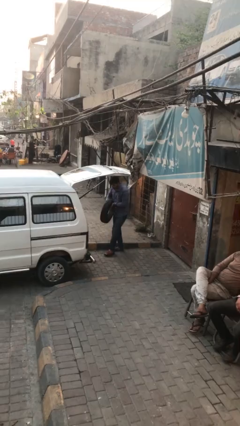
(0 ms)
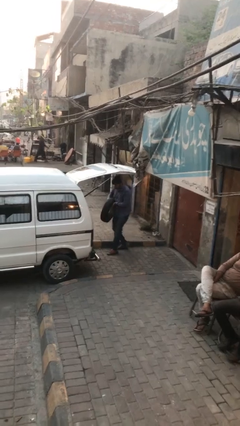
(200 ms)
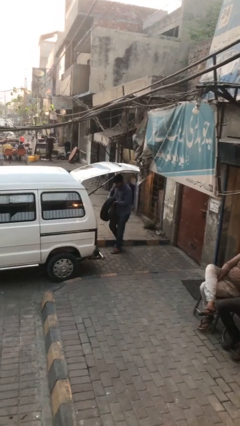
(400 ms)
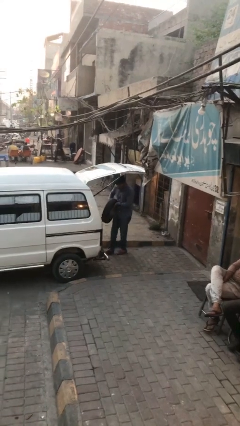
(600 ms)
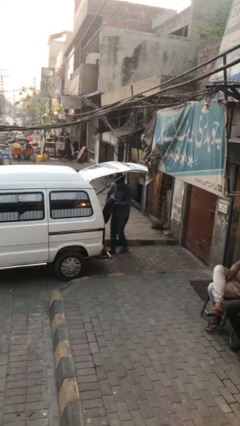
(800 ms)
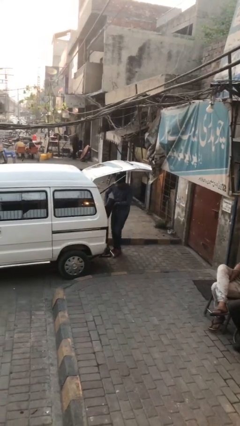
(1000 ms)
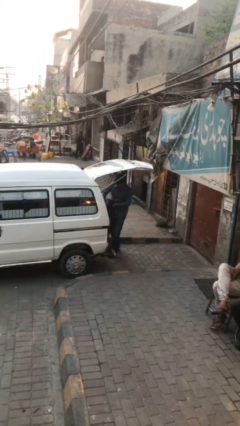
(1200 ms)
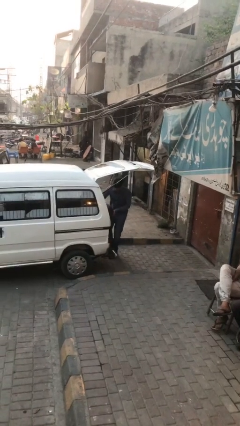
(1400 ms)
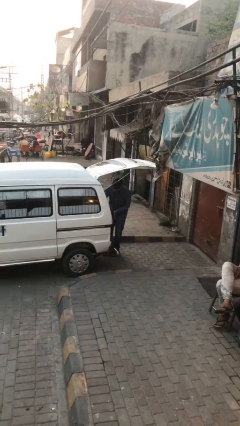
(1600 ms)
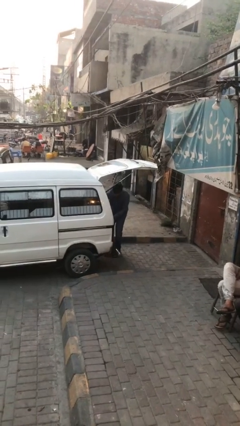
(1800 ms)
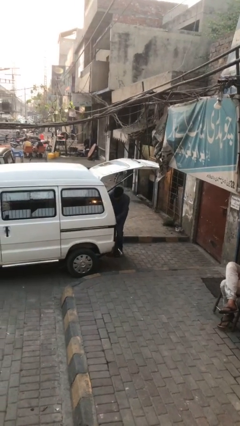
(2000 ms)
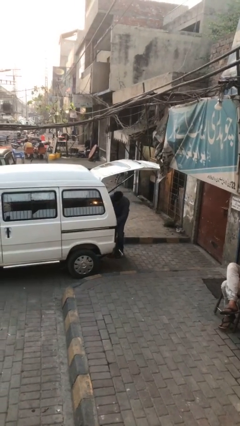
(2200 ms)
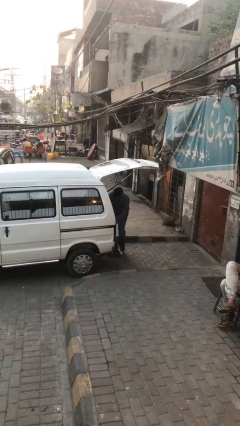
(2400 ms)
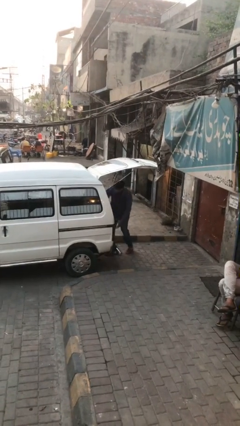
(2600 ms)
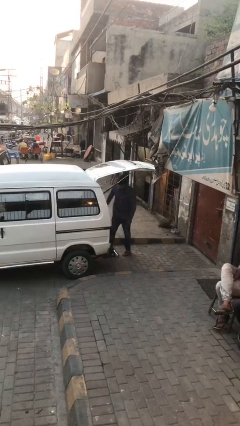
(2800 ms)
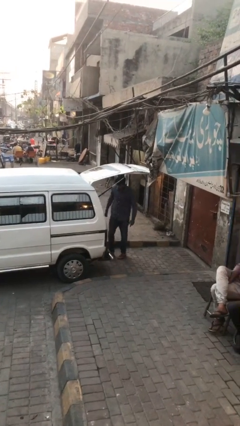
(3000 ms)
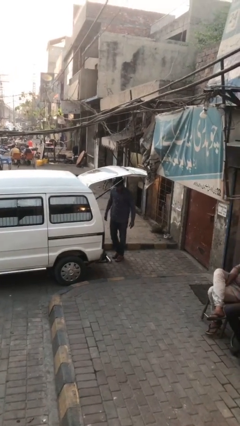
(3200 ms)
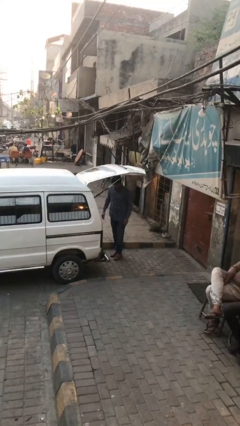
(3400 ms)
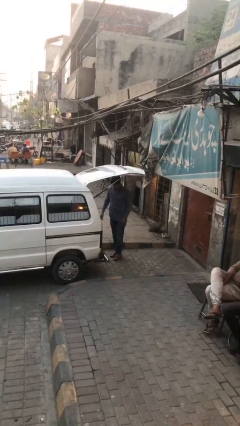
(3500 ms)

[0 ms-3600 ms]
person loads car

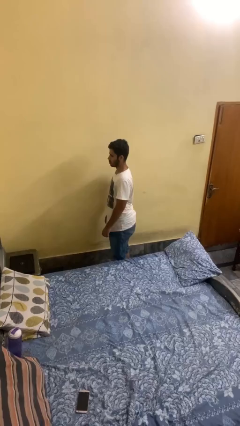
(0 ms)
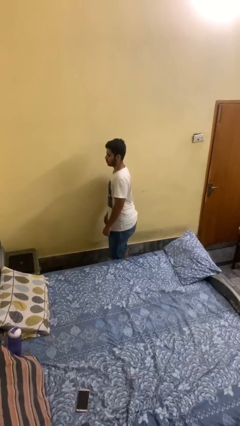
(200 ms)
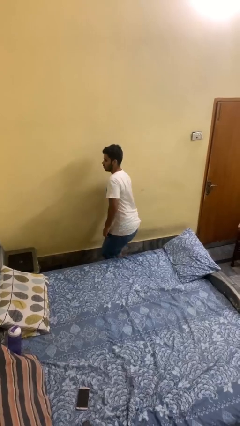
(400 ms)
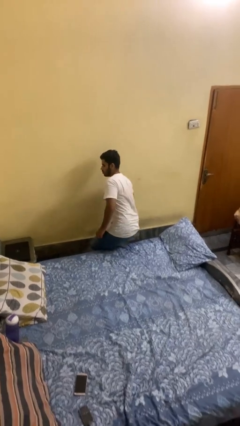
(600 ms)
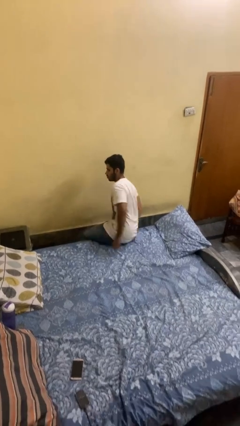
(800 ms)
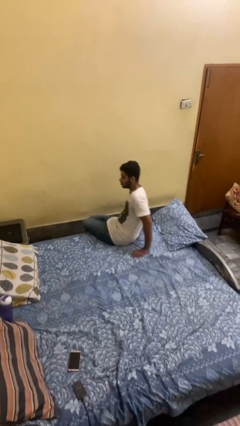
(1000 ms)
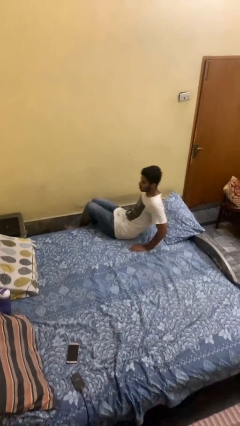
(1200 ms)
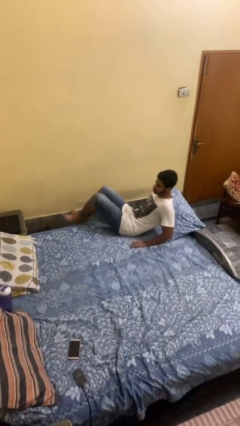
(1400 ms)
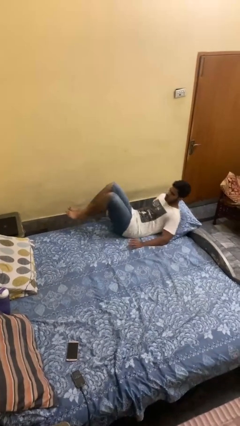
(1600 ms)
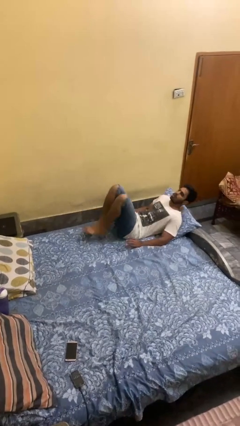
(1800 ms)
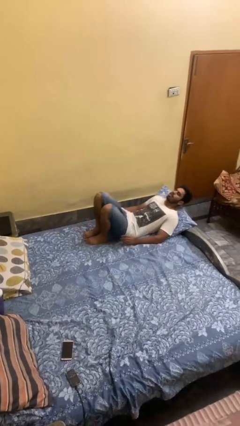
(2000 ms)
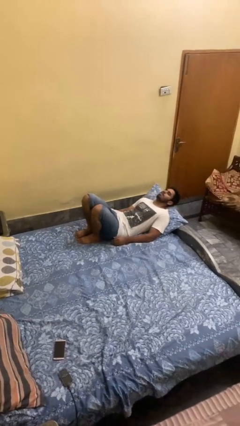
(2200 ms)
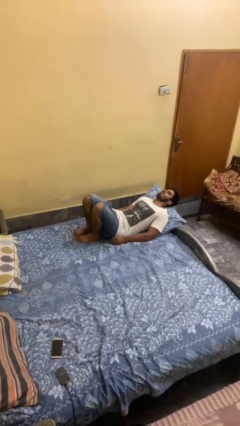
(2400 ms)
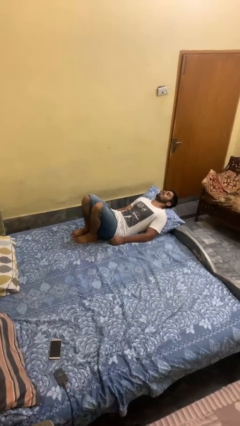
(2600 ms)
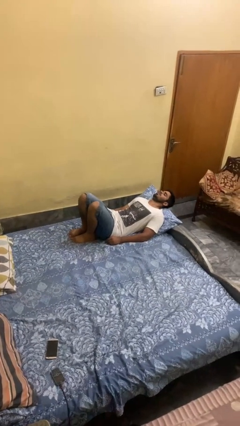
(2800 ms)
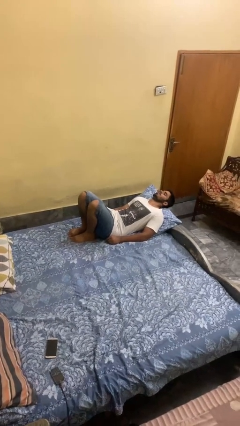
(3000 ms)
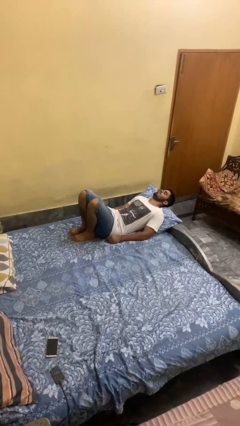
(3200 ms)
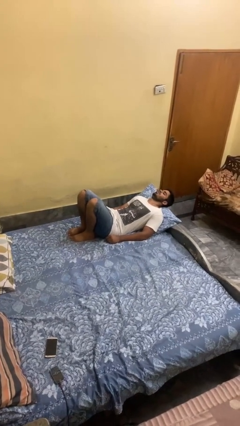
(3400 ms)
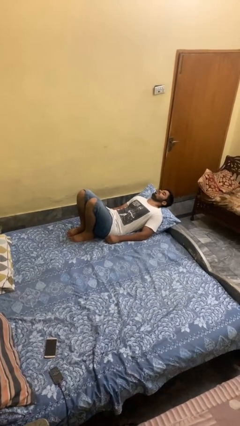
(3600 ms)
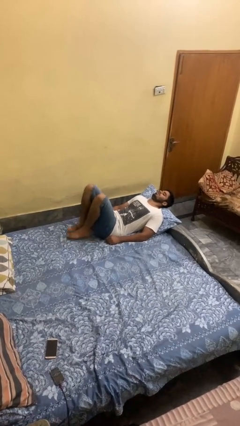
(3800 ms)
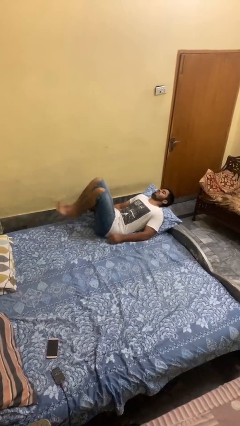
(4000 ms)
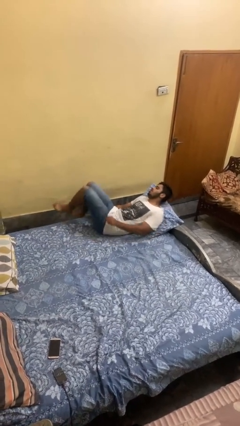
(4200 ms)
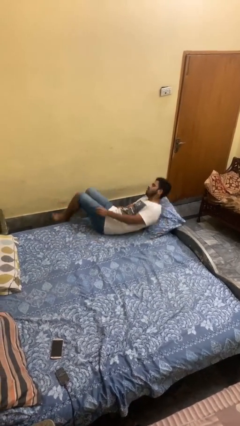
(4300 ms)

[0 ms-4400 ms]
person lies down on bed

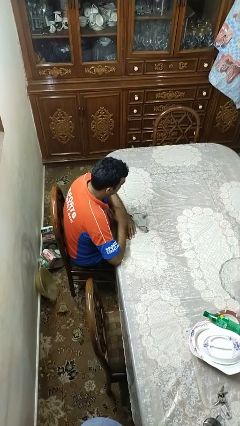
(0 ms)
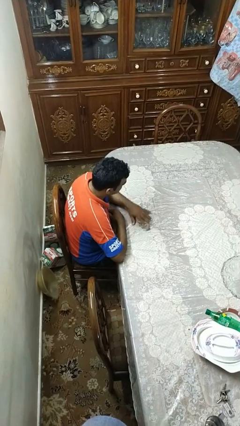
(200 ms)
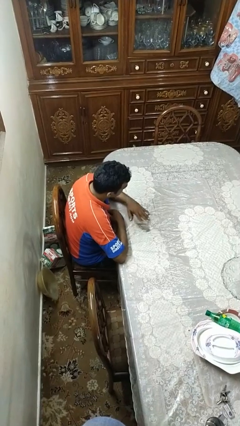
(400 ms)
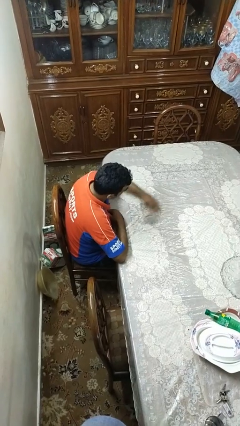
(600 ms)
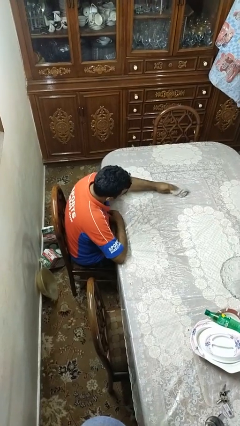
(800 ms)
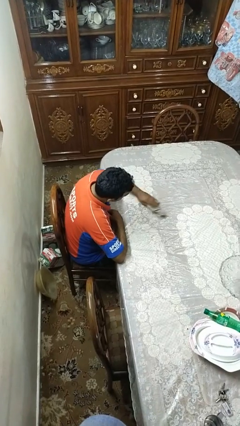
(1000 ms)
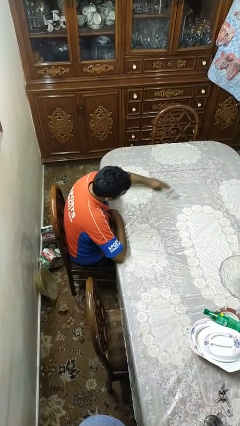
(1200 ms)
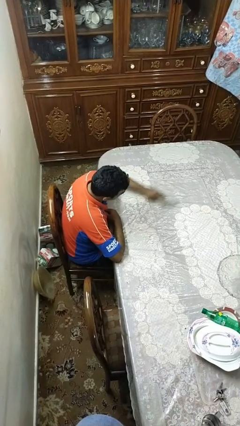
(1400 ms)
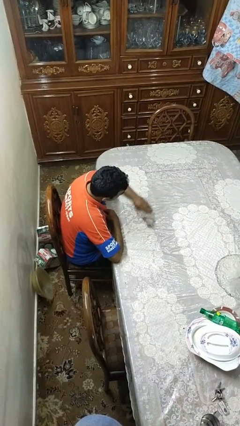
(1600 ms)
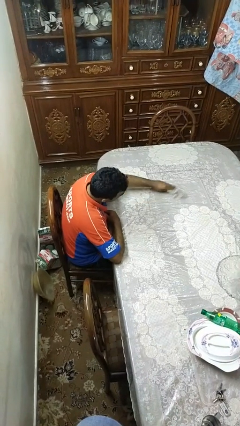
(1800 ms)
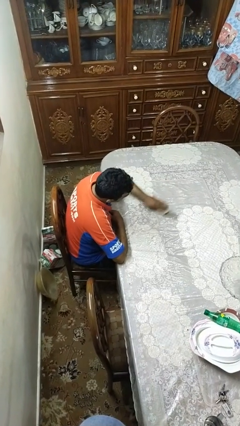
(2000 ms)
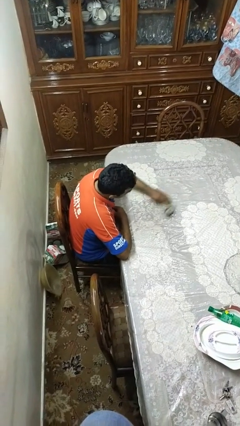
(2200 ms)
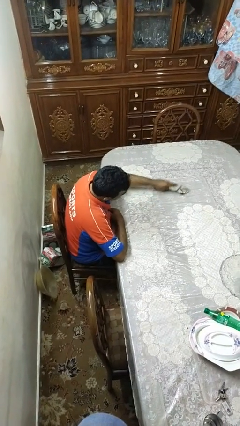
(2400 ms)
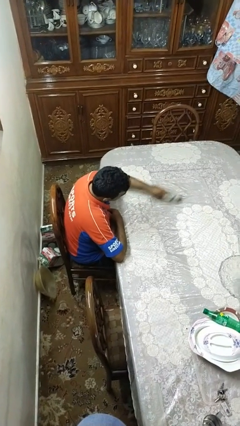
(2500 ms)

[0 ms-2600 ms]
person cleans table with rag

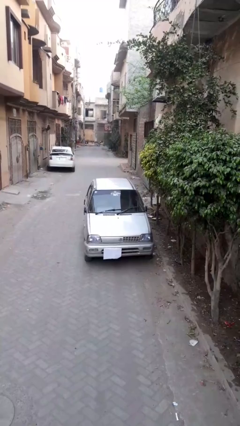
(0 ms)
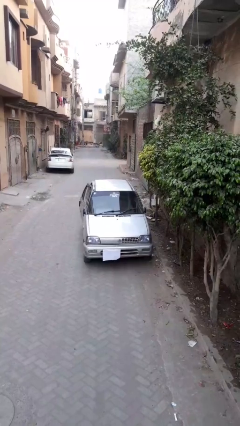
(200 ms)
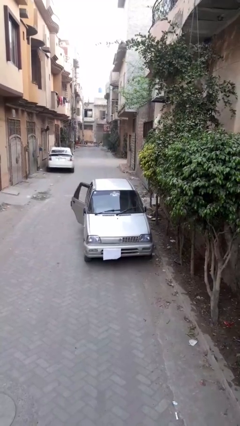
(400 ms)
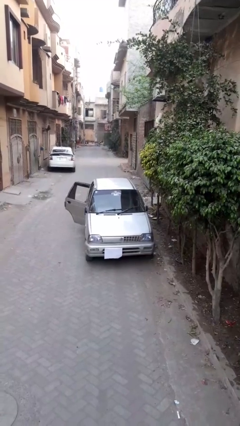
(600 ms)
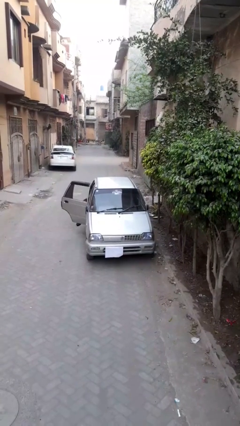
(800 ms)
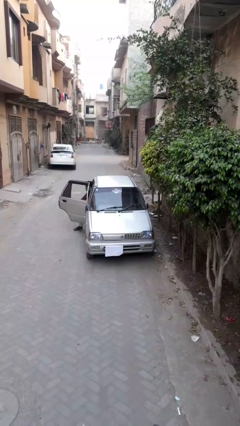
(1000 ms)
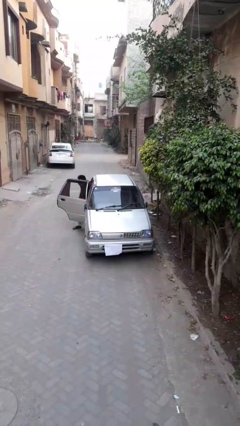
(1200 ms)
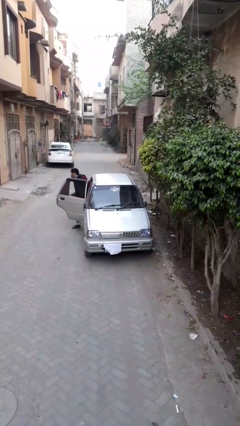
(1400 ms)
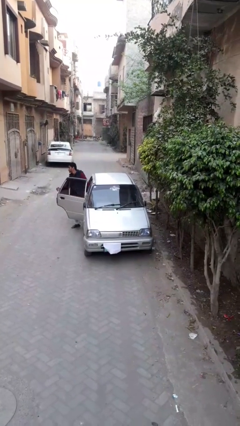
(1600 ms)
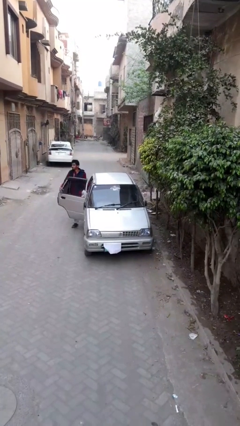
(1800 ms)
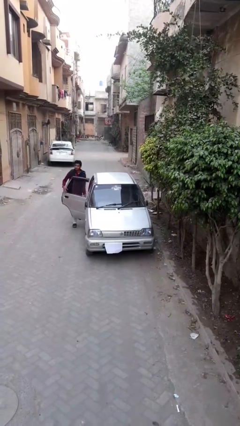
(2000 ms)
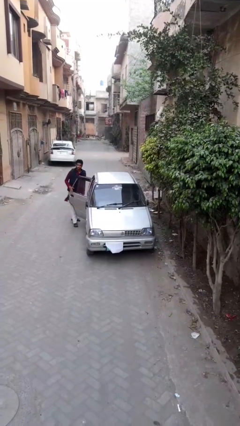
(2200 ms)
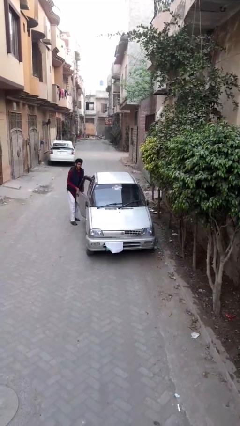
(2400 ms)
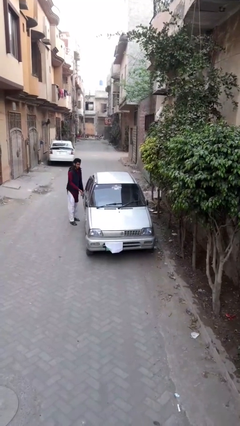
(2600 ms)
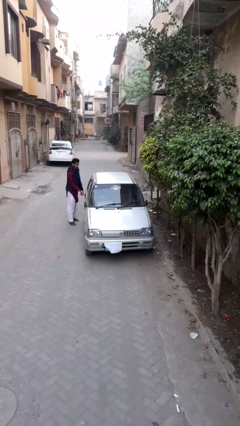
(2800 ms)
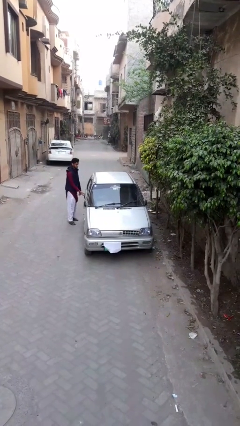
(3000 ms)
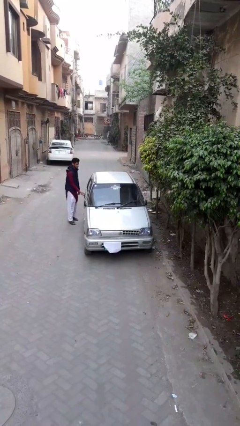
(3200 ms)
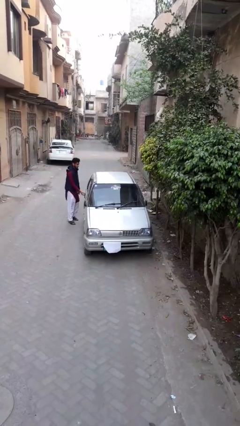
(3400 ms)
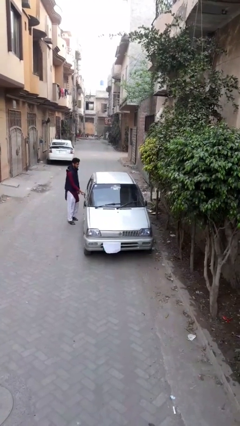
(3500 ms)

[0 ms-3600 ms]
car drops off person

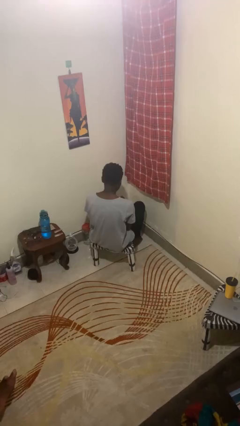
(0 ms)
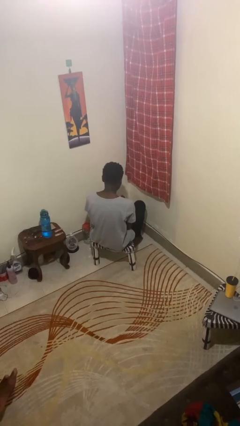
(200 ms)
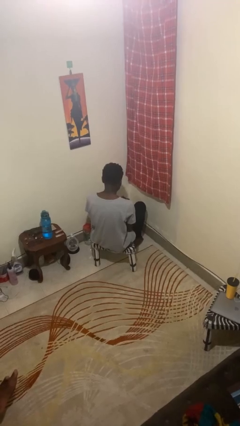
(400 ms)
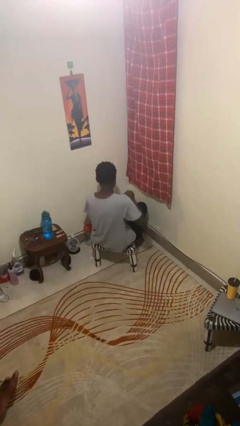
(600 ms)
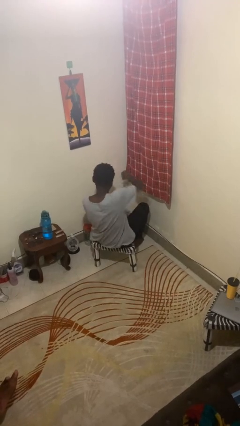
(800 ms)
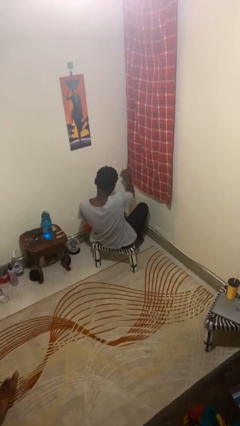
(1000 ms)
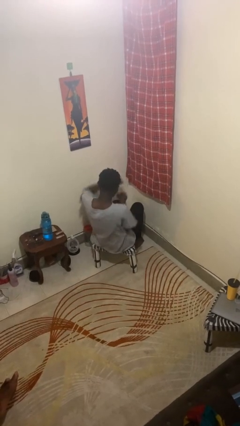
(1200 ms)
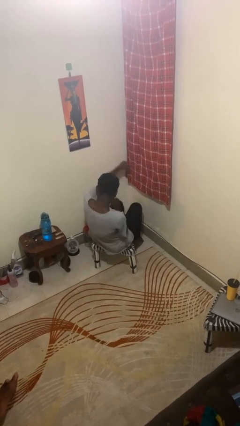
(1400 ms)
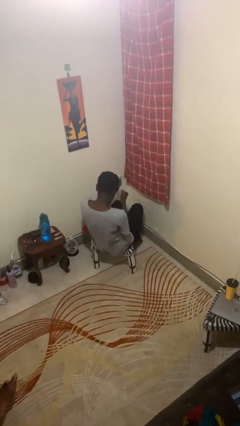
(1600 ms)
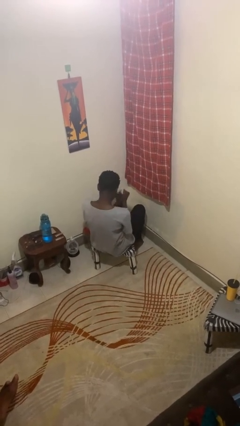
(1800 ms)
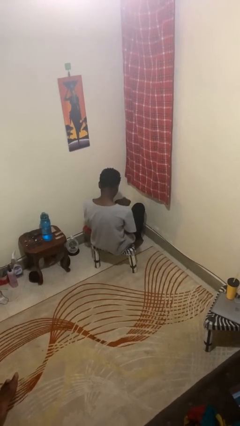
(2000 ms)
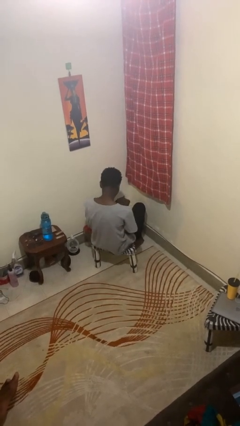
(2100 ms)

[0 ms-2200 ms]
person punches

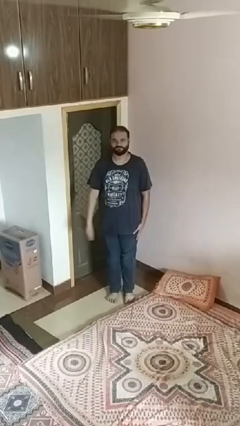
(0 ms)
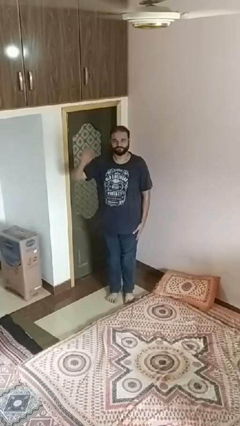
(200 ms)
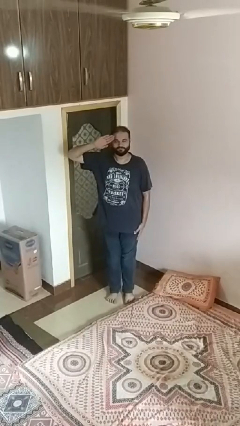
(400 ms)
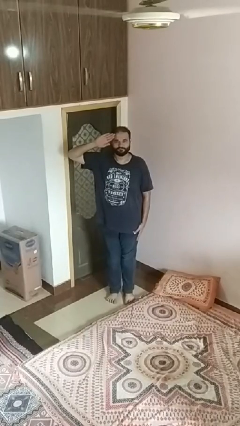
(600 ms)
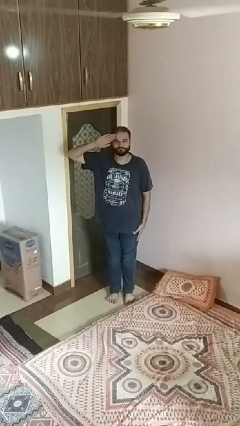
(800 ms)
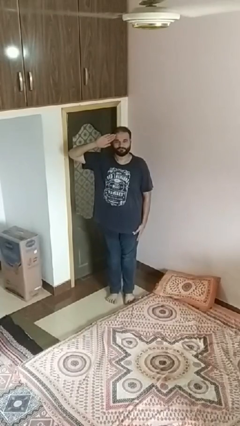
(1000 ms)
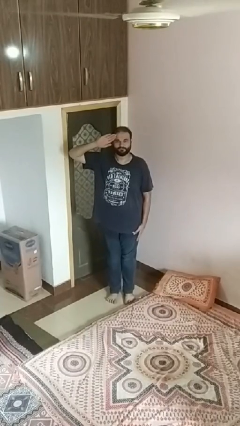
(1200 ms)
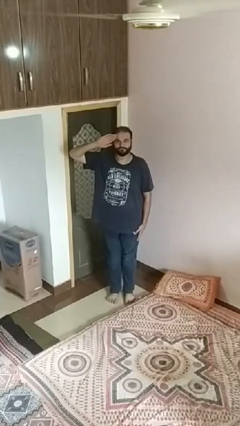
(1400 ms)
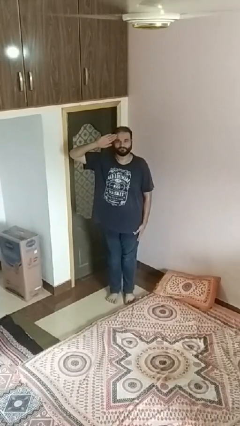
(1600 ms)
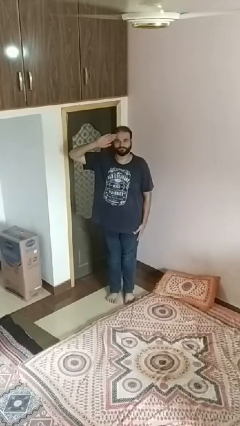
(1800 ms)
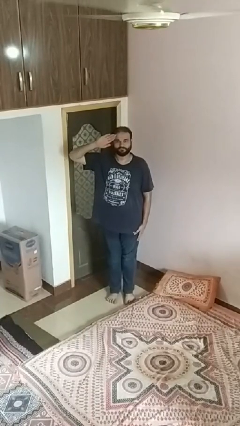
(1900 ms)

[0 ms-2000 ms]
person salutes
